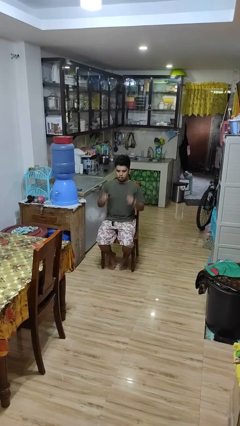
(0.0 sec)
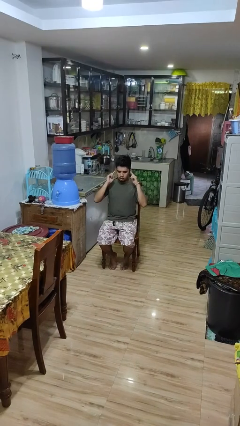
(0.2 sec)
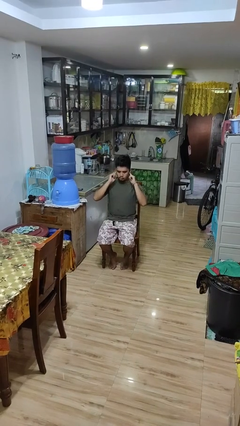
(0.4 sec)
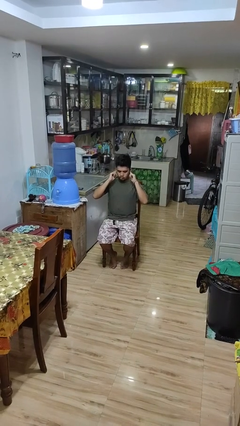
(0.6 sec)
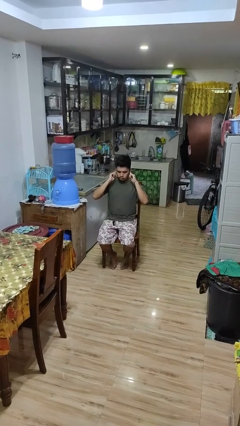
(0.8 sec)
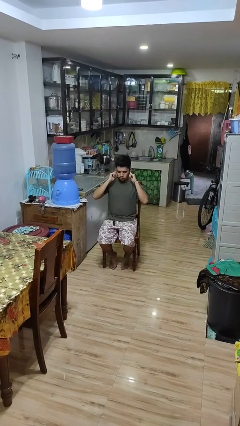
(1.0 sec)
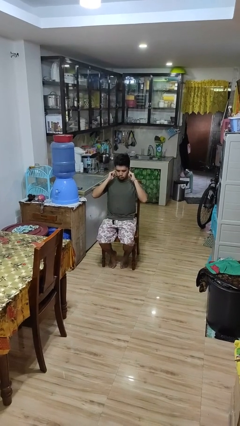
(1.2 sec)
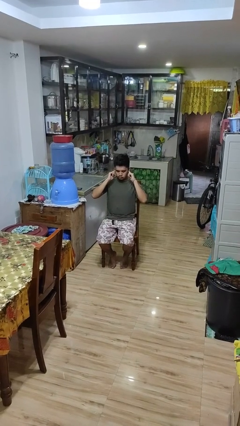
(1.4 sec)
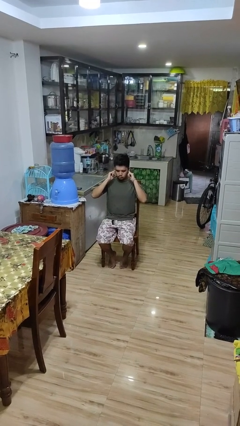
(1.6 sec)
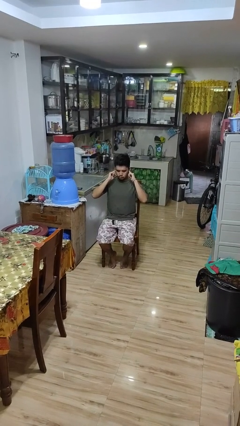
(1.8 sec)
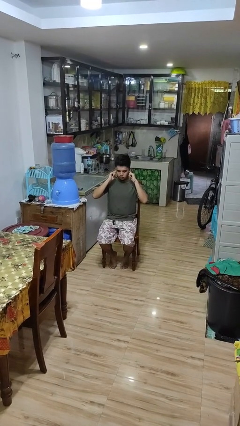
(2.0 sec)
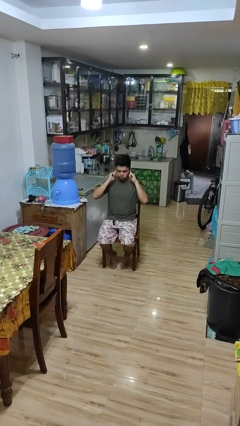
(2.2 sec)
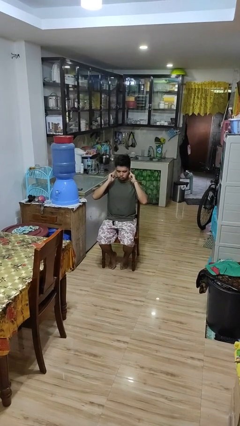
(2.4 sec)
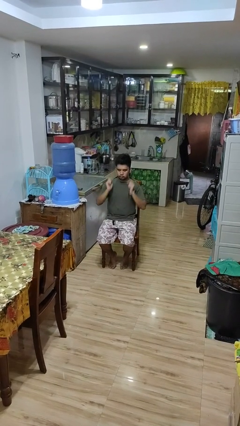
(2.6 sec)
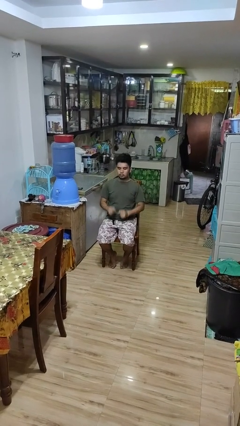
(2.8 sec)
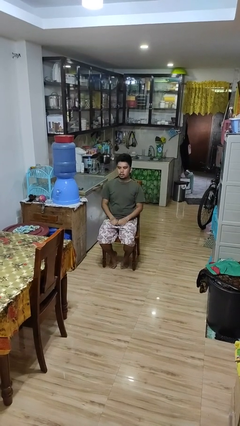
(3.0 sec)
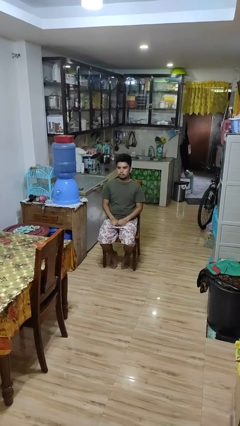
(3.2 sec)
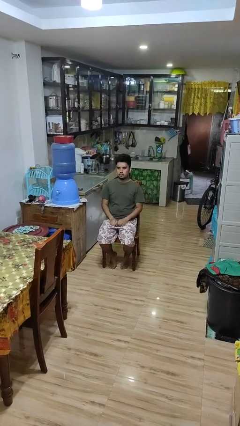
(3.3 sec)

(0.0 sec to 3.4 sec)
person puts fingers in ear

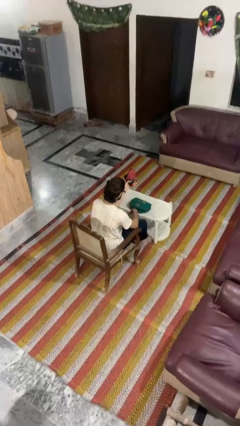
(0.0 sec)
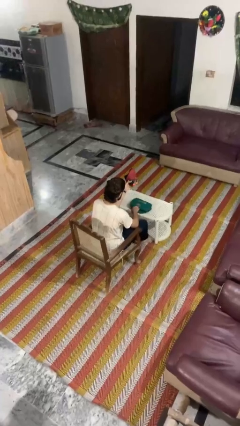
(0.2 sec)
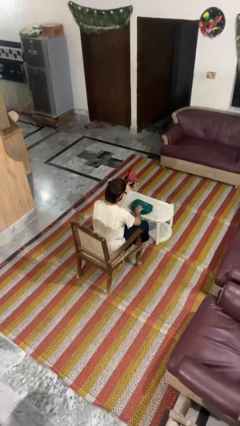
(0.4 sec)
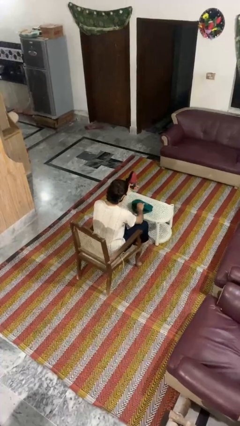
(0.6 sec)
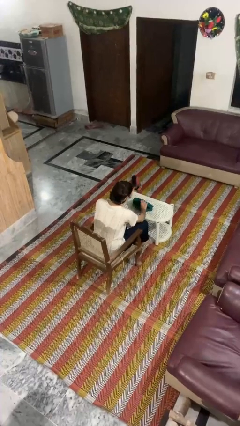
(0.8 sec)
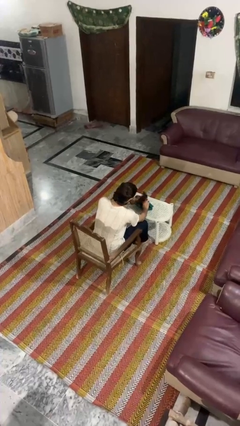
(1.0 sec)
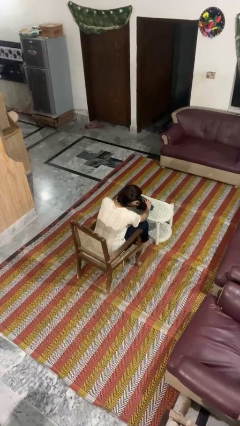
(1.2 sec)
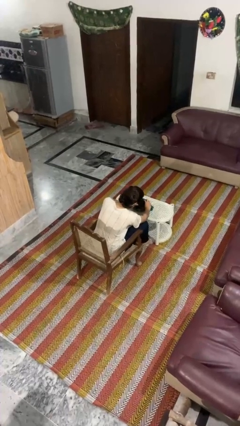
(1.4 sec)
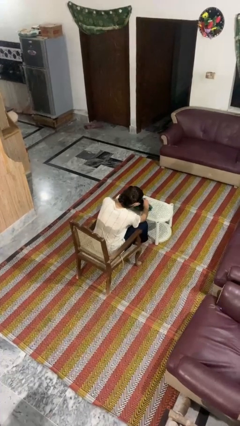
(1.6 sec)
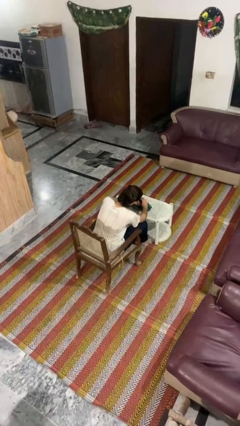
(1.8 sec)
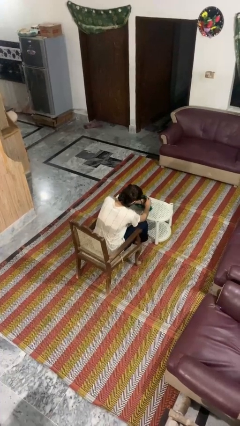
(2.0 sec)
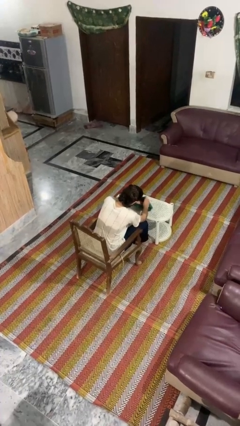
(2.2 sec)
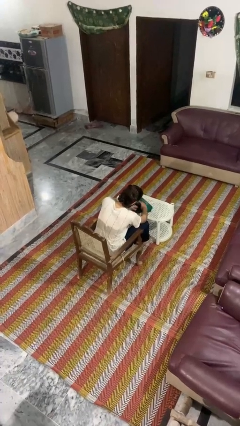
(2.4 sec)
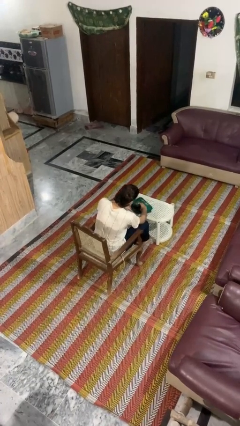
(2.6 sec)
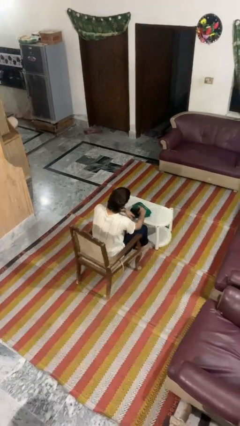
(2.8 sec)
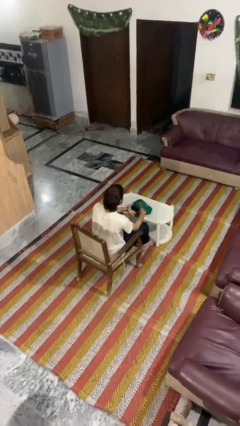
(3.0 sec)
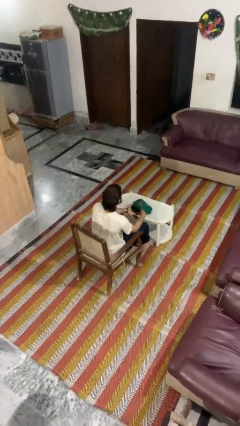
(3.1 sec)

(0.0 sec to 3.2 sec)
person puts object into purse

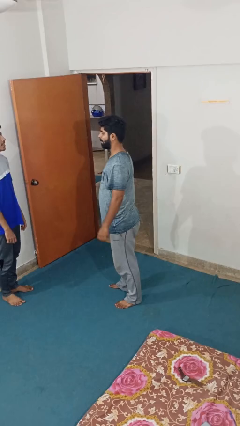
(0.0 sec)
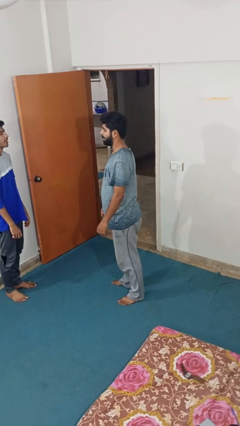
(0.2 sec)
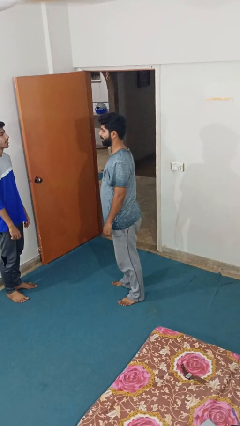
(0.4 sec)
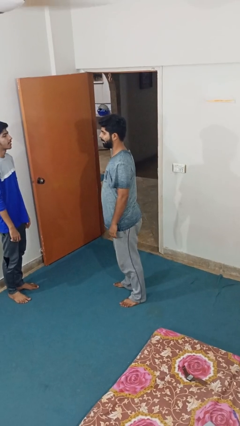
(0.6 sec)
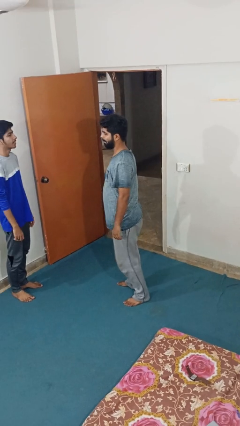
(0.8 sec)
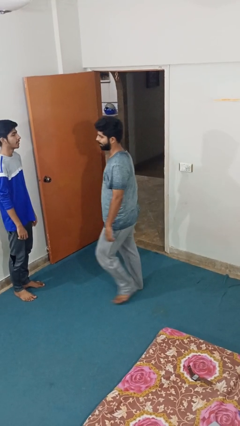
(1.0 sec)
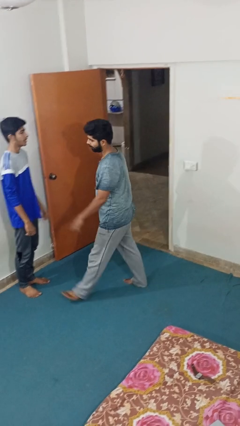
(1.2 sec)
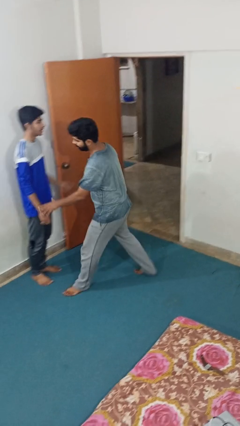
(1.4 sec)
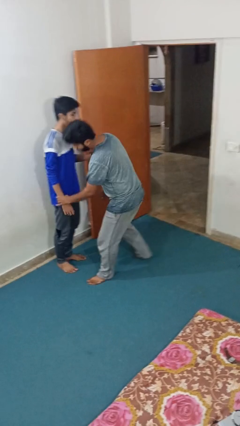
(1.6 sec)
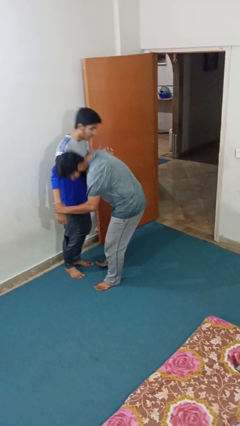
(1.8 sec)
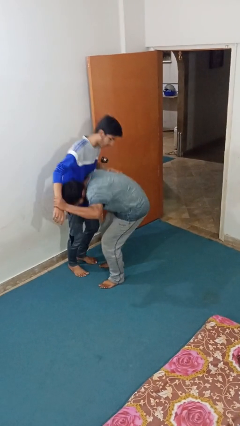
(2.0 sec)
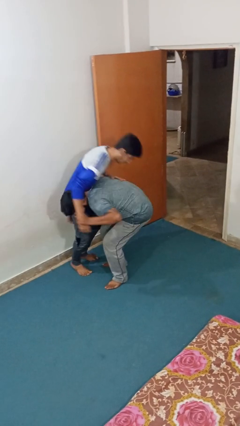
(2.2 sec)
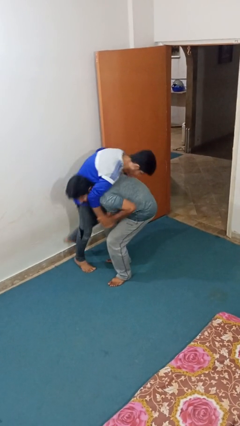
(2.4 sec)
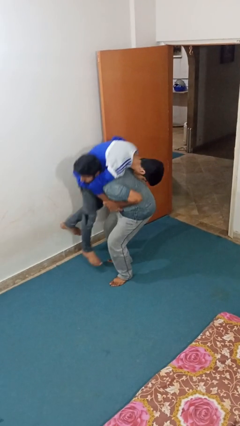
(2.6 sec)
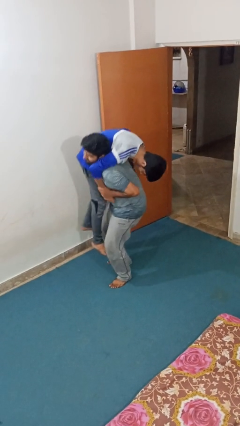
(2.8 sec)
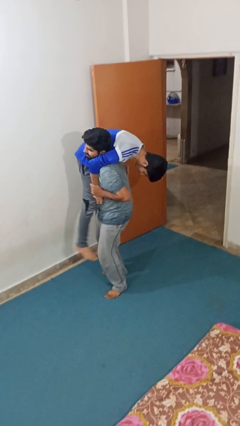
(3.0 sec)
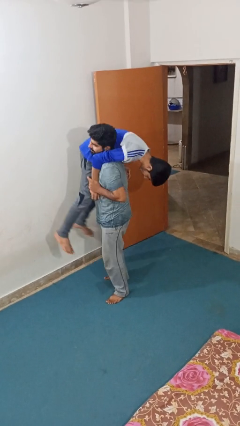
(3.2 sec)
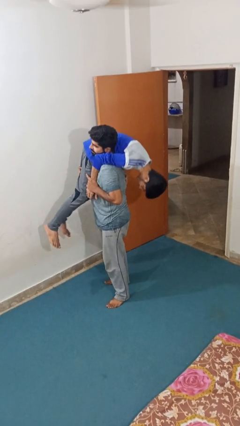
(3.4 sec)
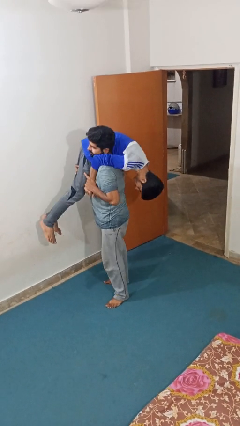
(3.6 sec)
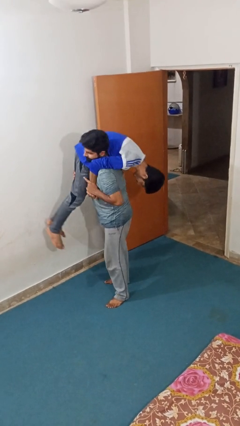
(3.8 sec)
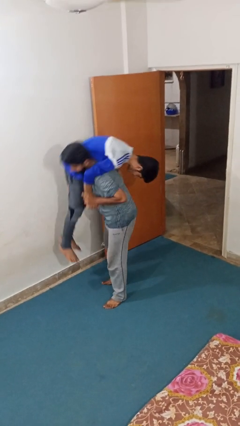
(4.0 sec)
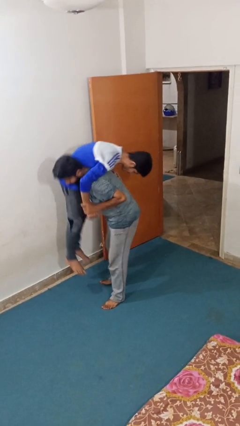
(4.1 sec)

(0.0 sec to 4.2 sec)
person carries person over shoulder

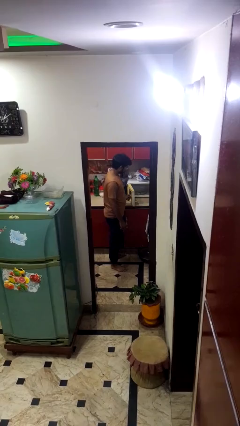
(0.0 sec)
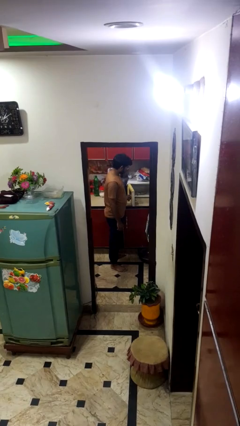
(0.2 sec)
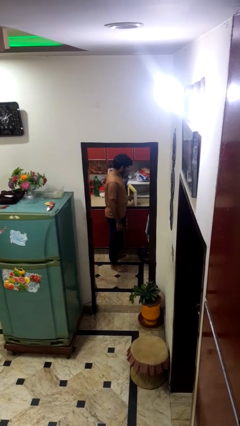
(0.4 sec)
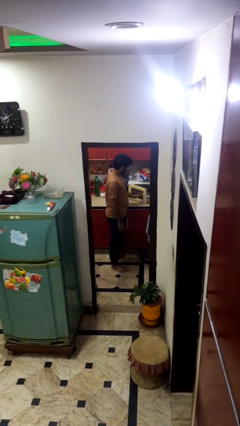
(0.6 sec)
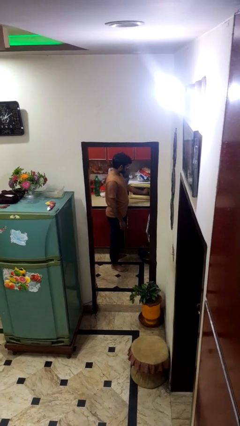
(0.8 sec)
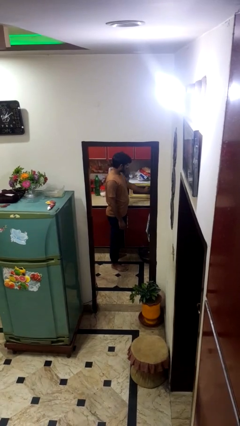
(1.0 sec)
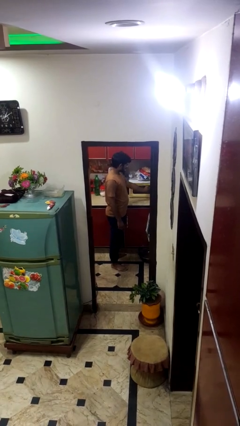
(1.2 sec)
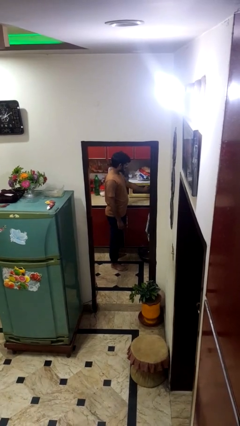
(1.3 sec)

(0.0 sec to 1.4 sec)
person closes microwave

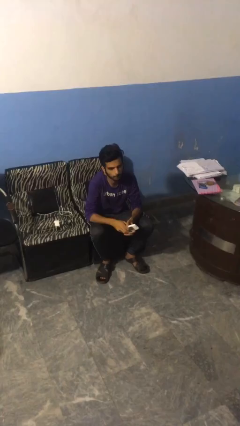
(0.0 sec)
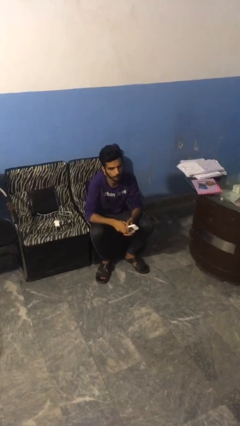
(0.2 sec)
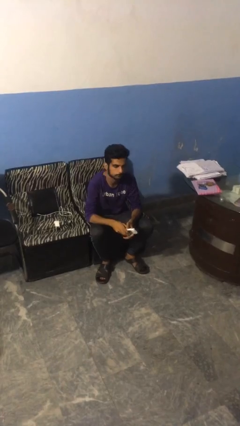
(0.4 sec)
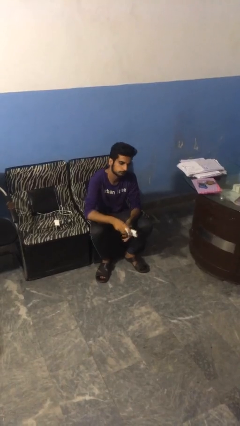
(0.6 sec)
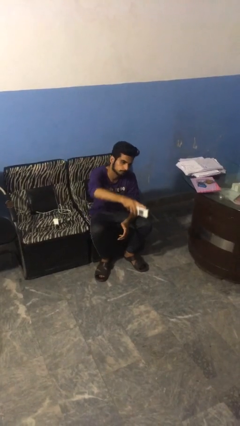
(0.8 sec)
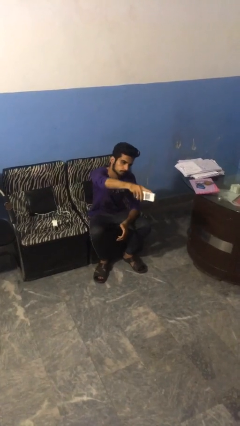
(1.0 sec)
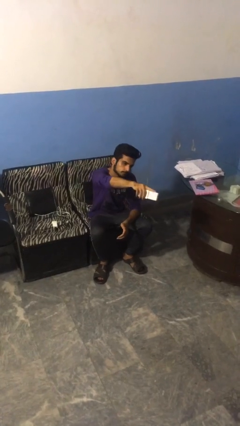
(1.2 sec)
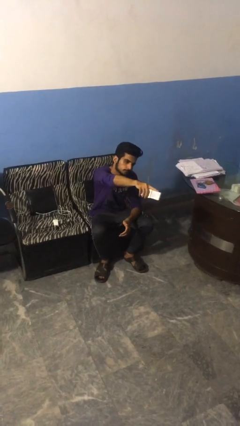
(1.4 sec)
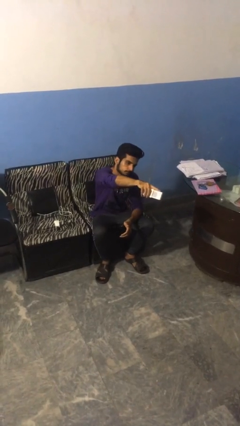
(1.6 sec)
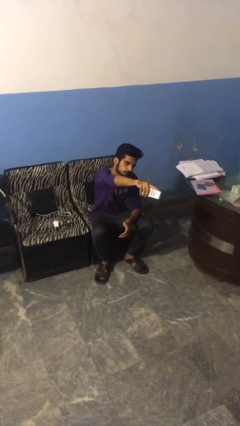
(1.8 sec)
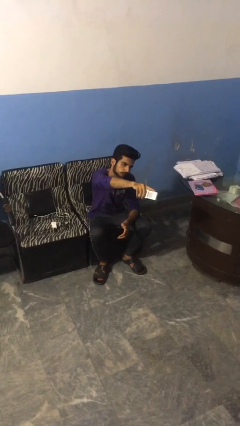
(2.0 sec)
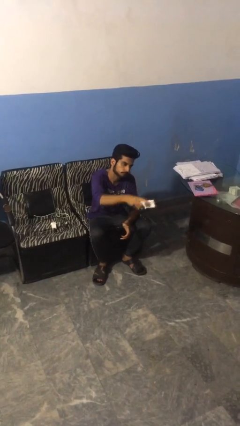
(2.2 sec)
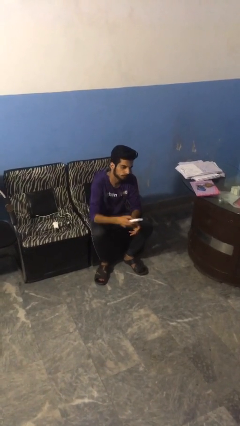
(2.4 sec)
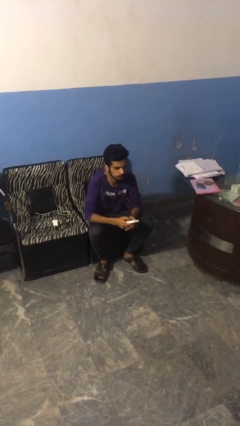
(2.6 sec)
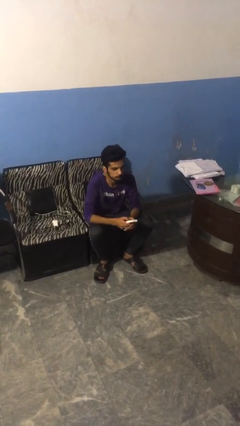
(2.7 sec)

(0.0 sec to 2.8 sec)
person uses television remote

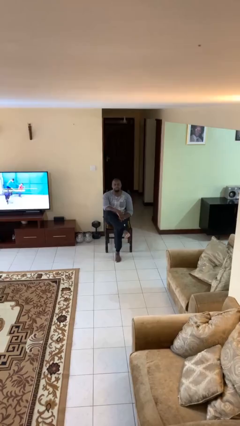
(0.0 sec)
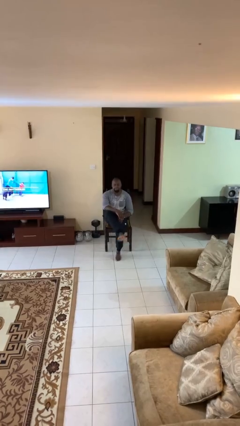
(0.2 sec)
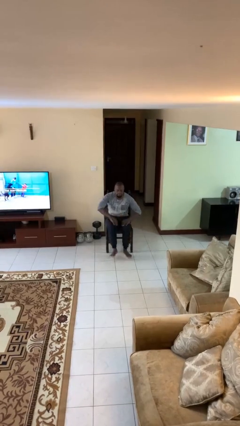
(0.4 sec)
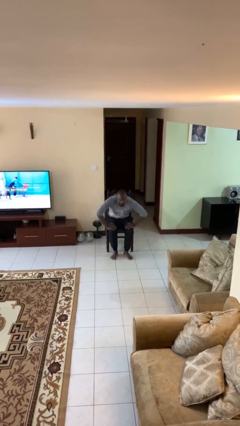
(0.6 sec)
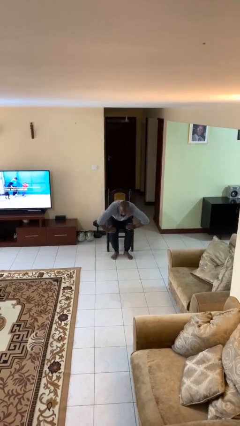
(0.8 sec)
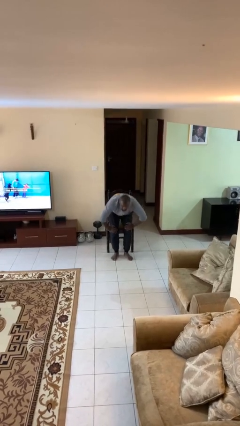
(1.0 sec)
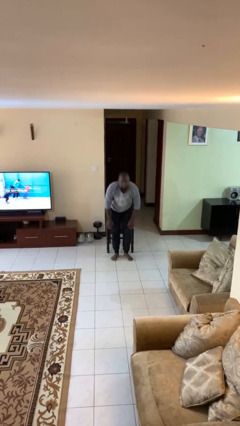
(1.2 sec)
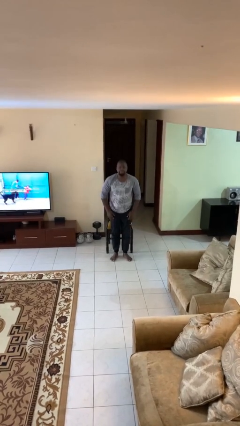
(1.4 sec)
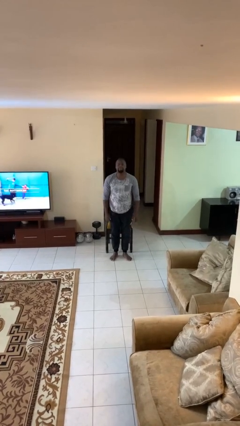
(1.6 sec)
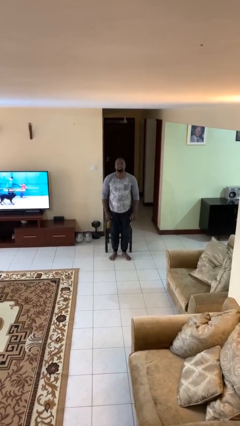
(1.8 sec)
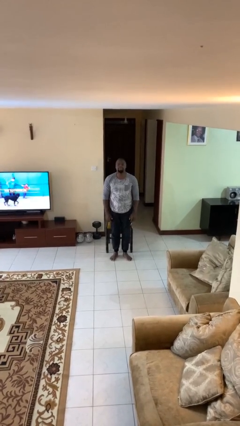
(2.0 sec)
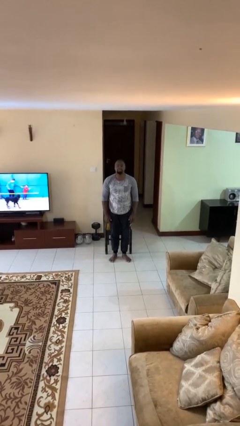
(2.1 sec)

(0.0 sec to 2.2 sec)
person stands up
